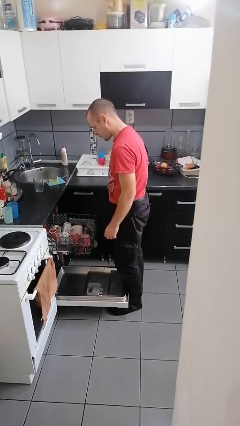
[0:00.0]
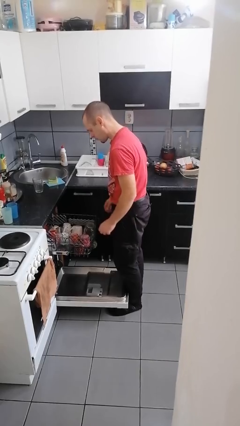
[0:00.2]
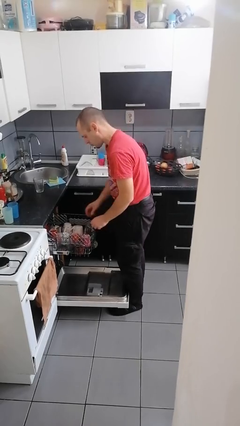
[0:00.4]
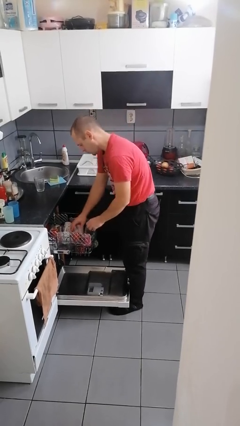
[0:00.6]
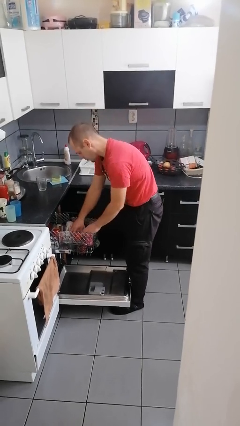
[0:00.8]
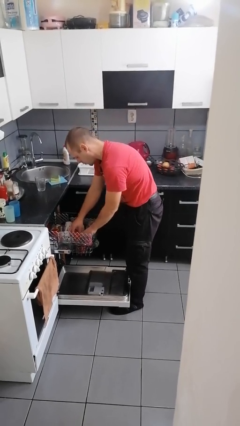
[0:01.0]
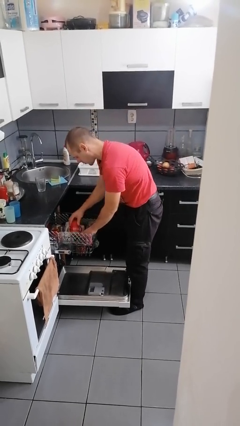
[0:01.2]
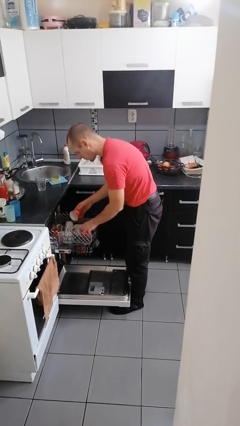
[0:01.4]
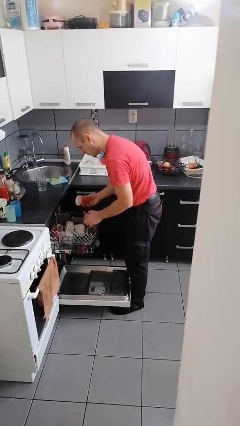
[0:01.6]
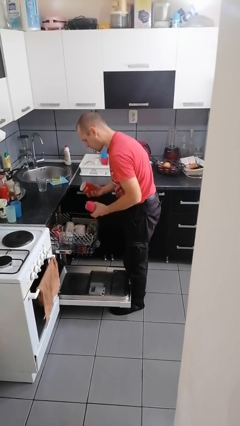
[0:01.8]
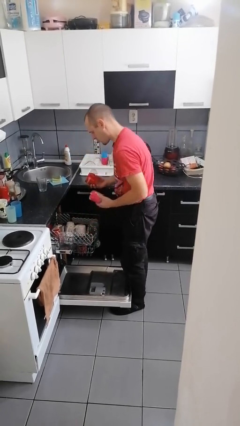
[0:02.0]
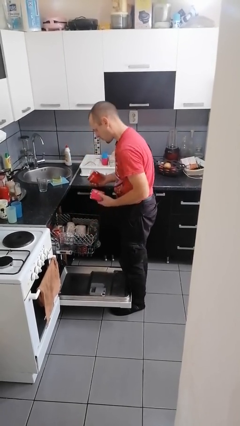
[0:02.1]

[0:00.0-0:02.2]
person unloads dishwasher

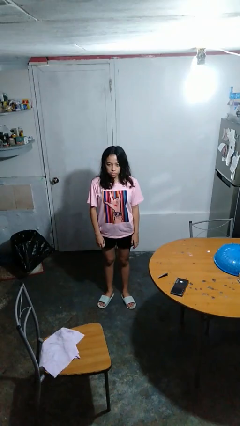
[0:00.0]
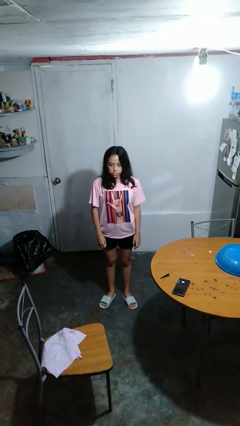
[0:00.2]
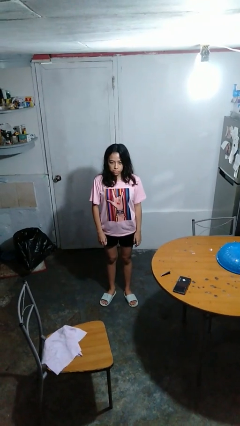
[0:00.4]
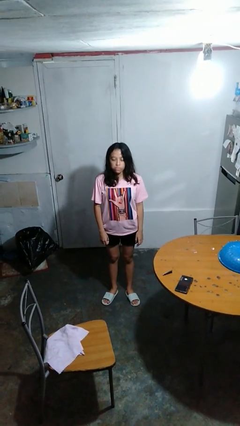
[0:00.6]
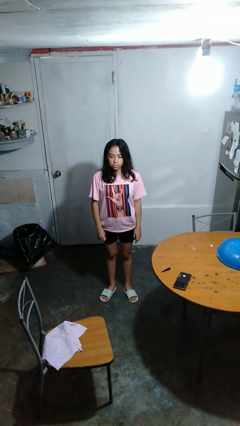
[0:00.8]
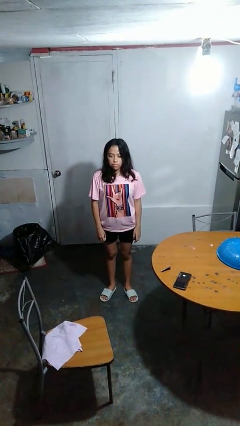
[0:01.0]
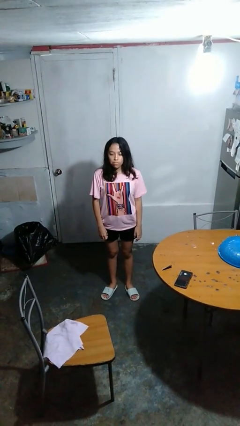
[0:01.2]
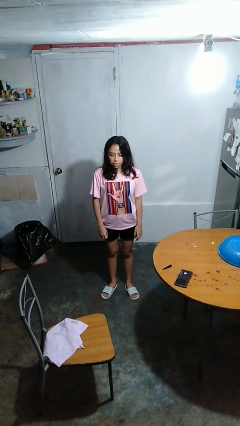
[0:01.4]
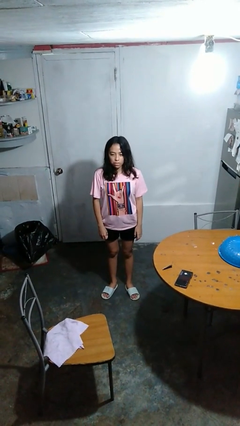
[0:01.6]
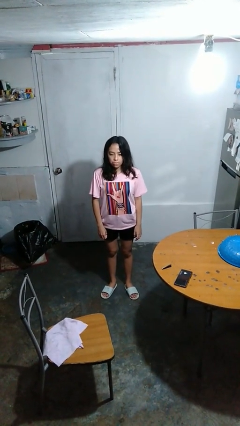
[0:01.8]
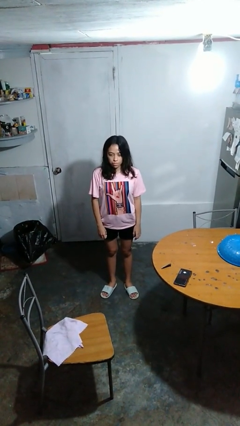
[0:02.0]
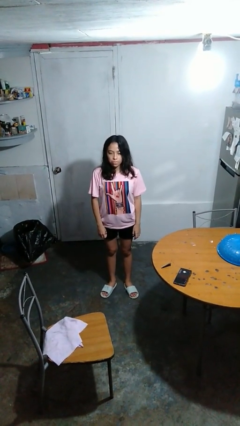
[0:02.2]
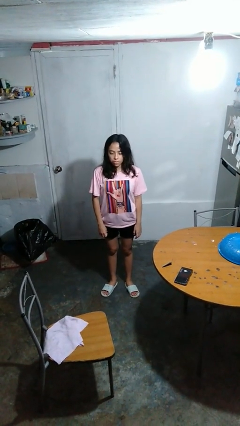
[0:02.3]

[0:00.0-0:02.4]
person nods head

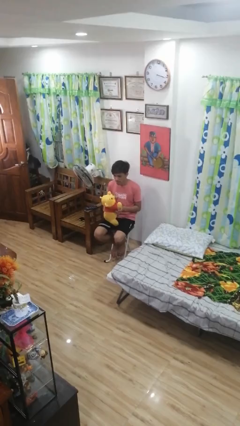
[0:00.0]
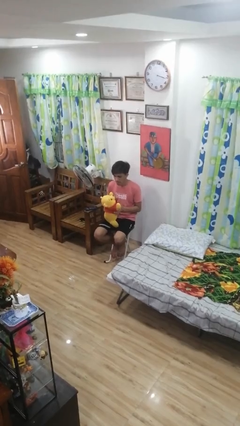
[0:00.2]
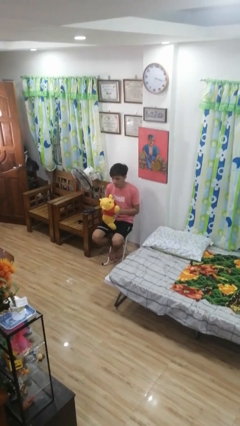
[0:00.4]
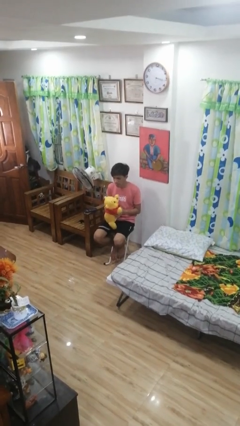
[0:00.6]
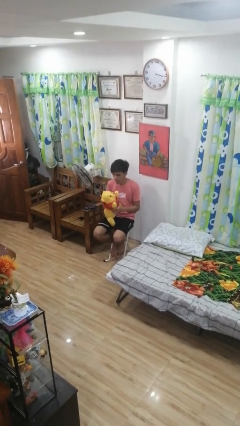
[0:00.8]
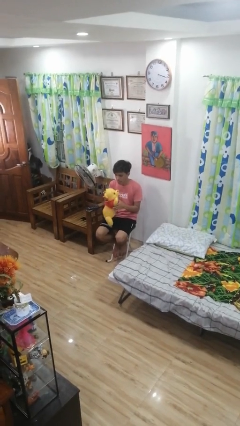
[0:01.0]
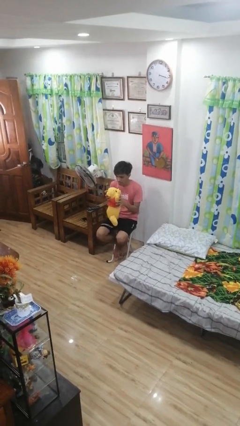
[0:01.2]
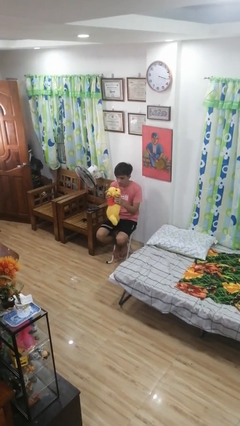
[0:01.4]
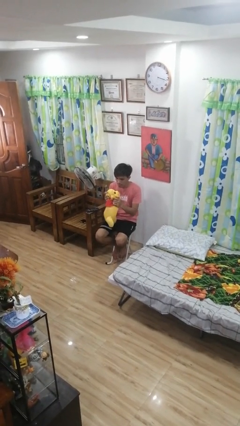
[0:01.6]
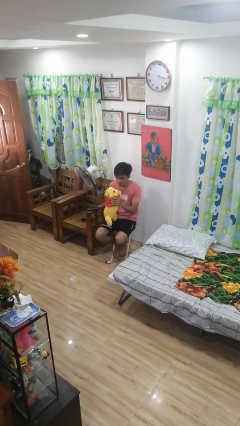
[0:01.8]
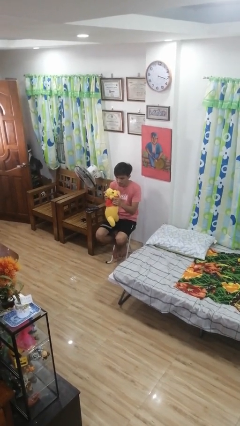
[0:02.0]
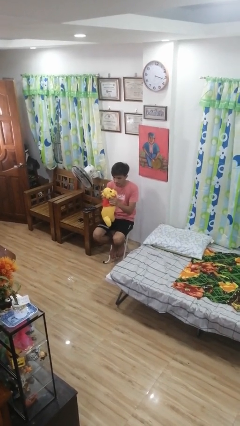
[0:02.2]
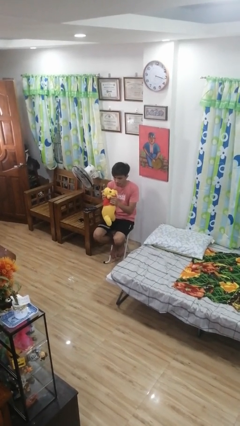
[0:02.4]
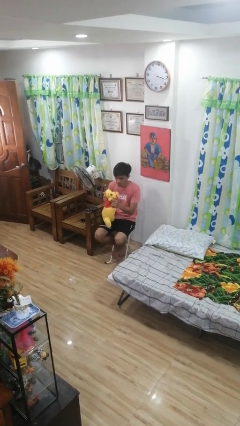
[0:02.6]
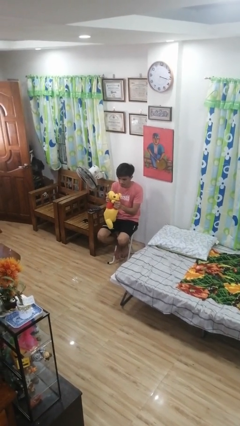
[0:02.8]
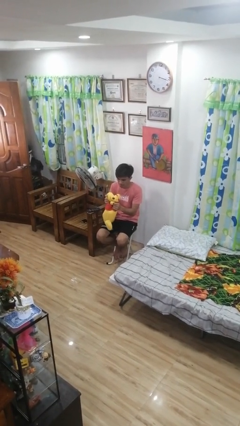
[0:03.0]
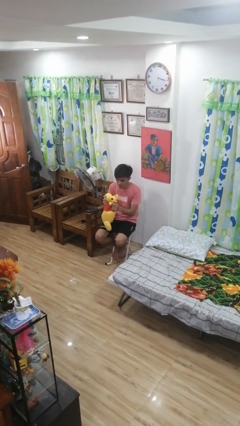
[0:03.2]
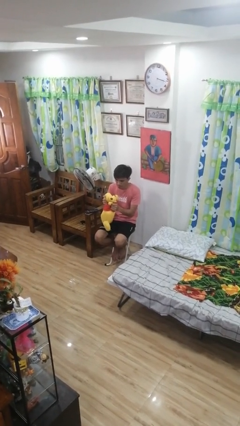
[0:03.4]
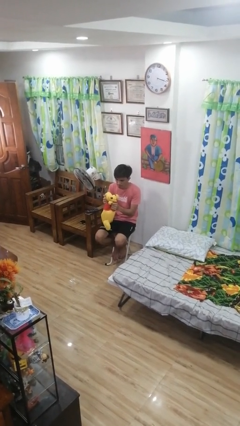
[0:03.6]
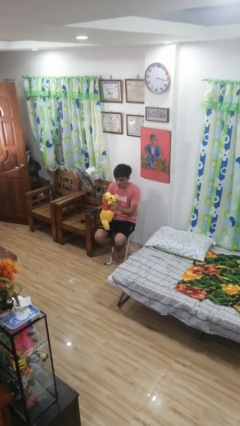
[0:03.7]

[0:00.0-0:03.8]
person squeezes object

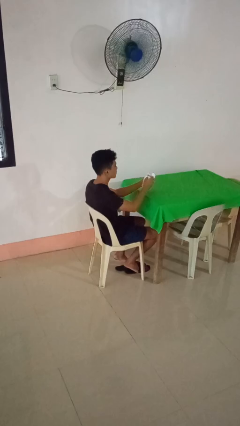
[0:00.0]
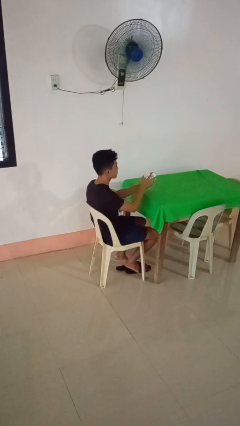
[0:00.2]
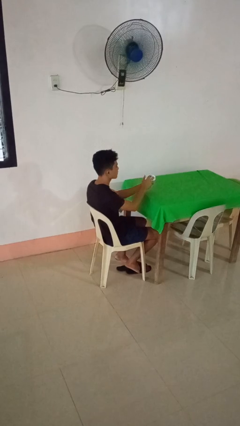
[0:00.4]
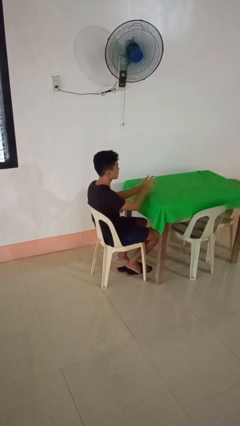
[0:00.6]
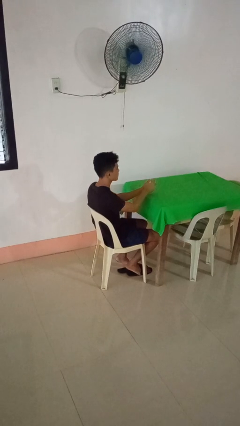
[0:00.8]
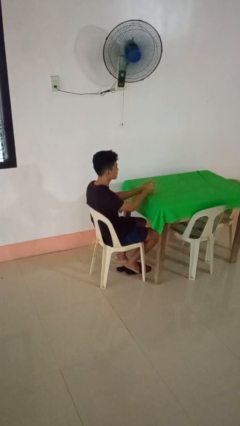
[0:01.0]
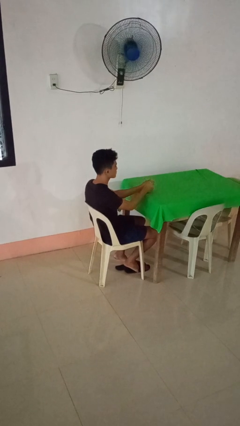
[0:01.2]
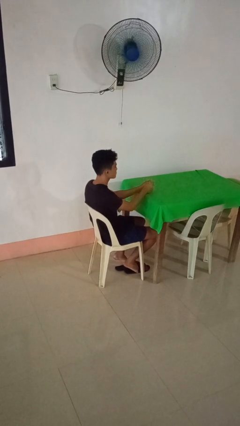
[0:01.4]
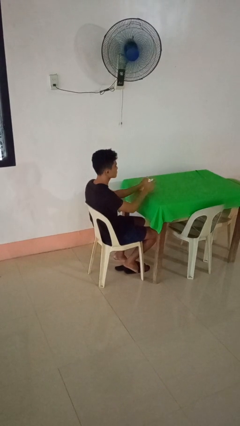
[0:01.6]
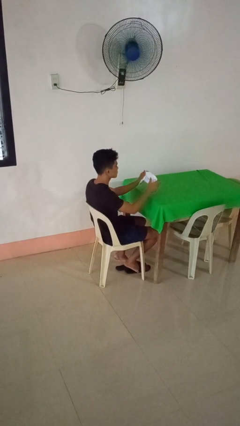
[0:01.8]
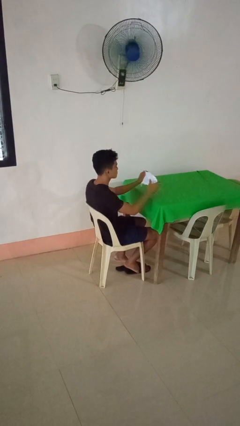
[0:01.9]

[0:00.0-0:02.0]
person crumples paper

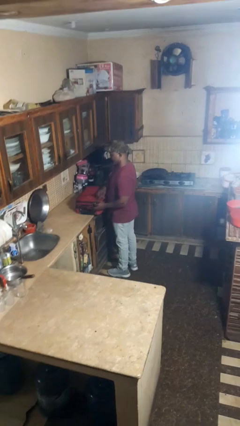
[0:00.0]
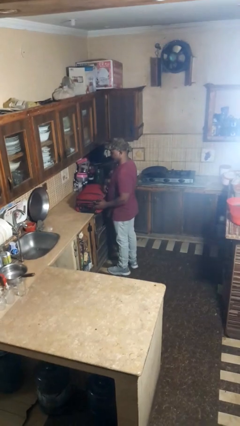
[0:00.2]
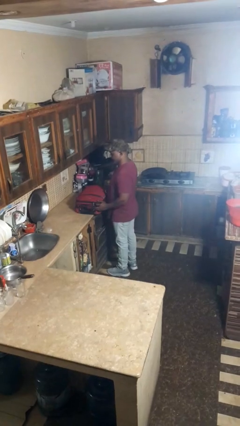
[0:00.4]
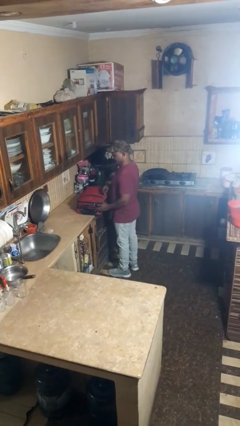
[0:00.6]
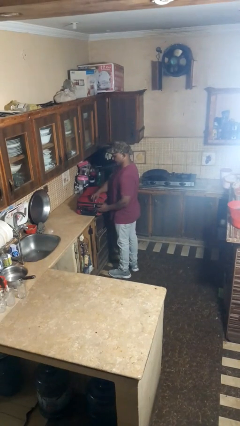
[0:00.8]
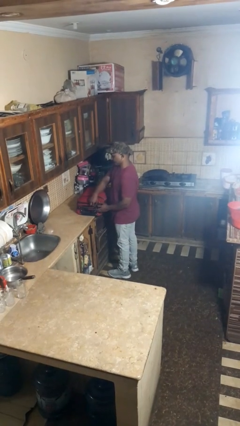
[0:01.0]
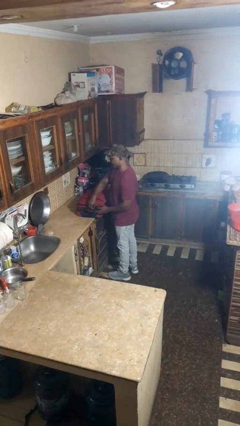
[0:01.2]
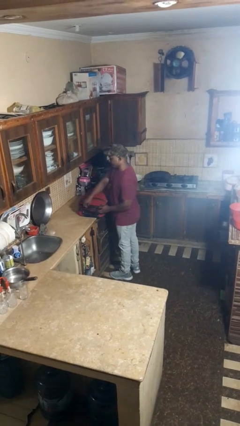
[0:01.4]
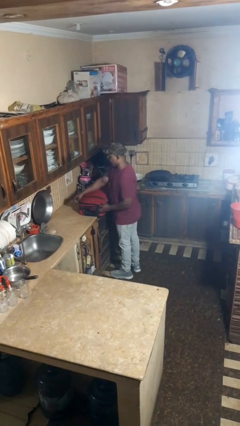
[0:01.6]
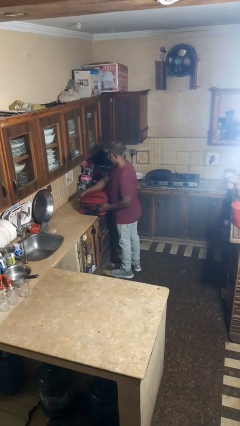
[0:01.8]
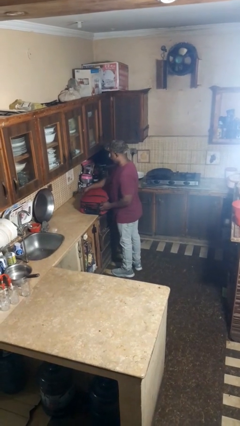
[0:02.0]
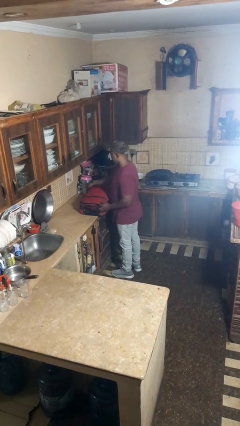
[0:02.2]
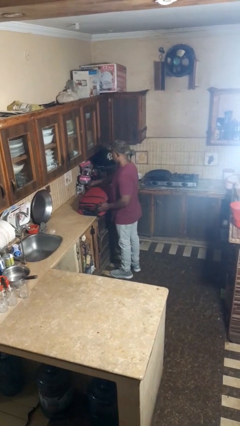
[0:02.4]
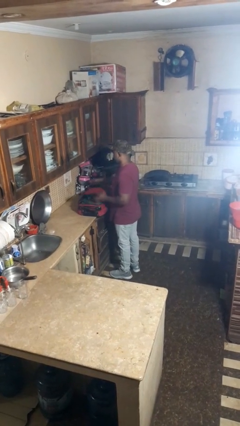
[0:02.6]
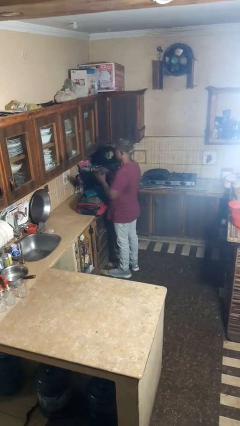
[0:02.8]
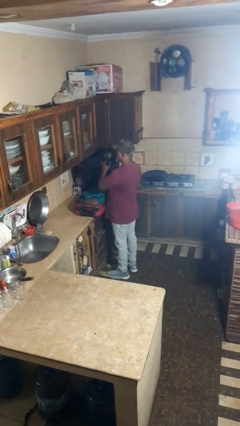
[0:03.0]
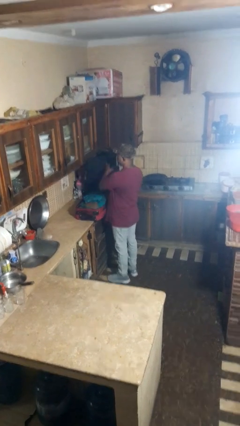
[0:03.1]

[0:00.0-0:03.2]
person opens suitcase

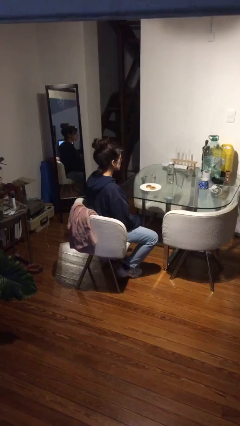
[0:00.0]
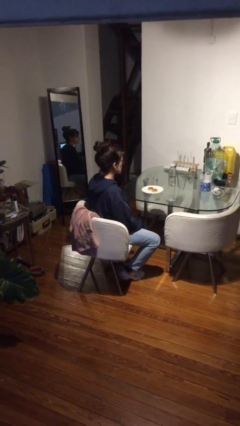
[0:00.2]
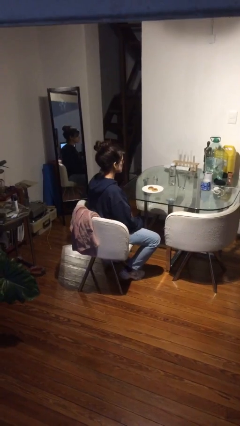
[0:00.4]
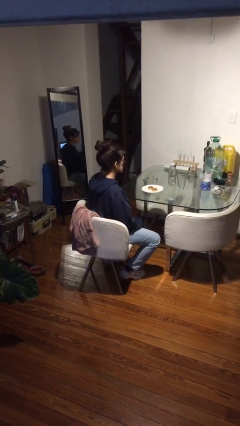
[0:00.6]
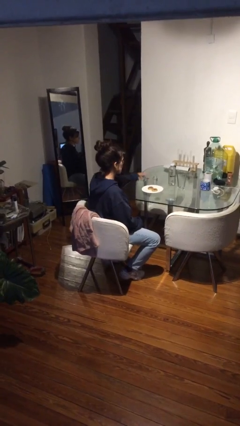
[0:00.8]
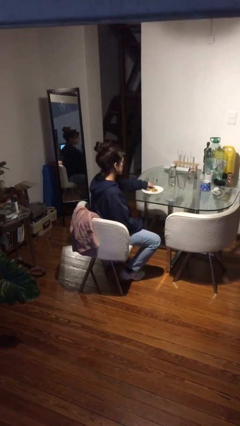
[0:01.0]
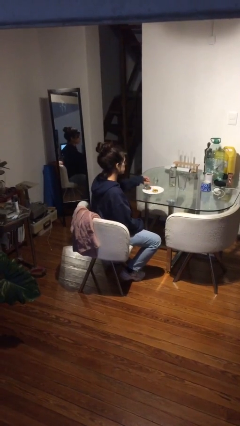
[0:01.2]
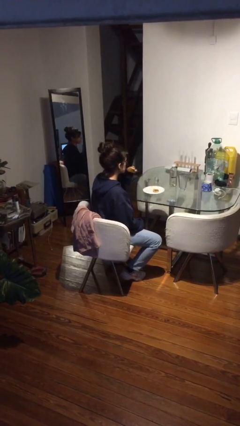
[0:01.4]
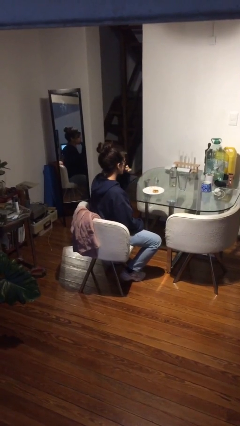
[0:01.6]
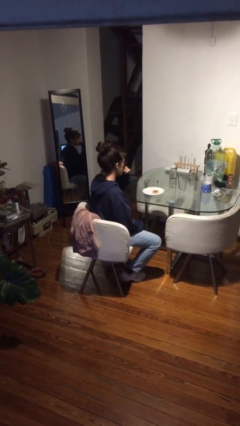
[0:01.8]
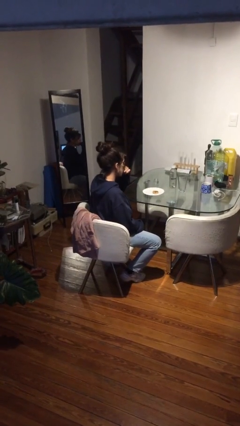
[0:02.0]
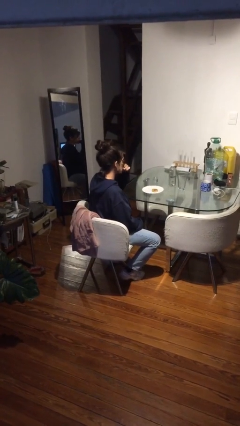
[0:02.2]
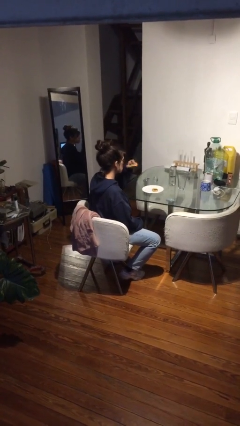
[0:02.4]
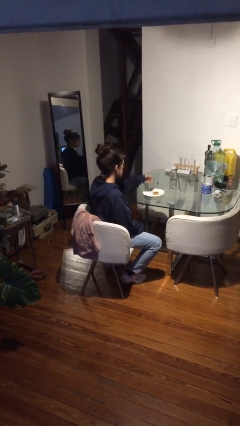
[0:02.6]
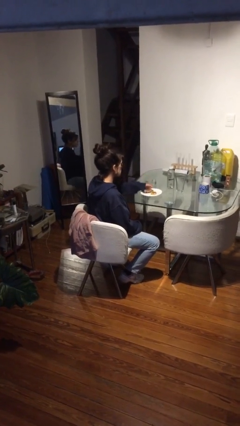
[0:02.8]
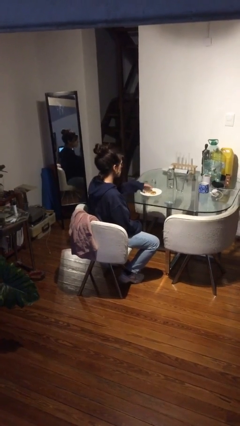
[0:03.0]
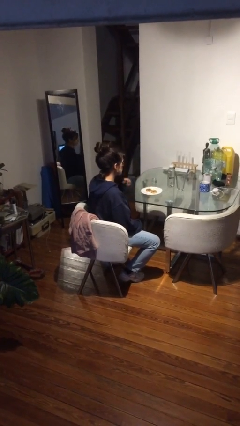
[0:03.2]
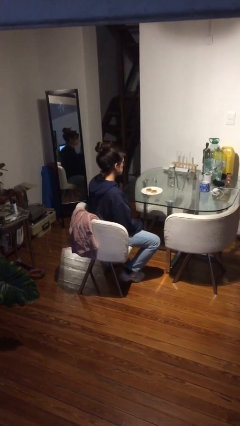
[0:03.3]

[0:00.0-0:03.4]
person eats with hands

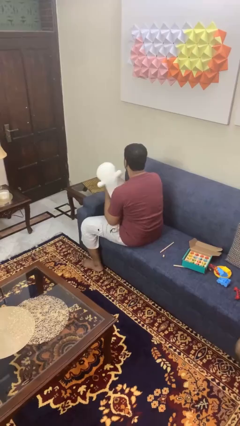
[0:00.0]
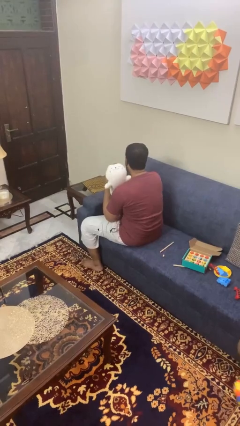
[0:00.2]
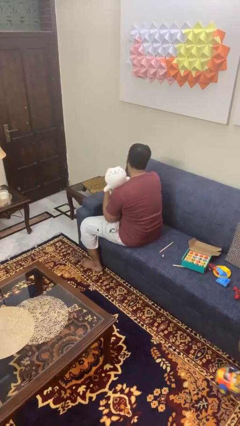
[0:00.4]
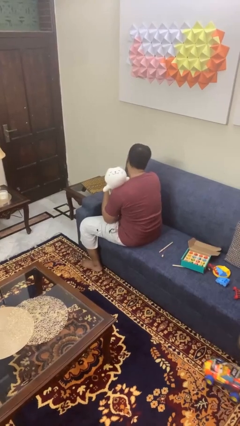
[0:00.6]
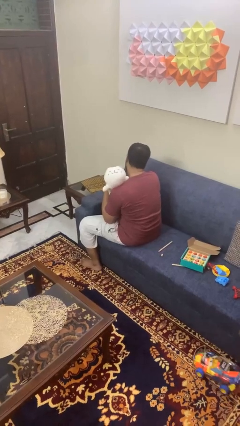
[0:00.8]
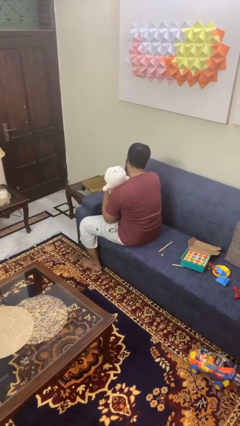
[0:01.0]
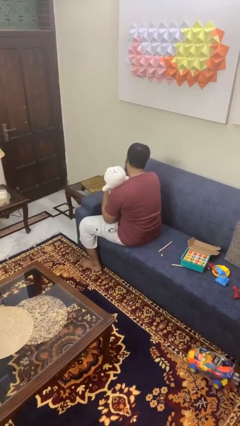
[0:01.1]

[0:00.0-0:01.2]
person hugs stuffed animal
